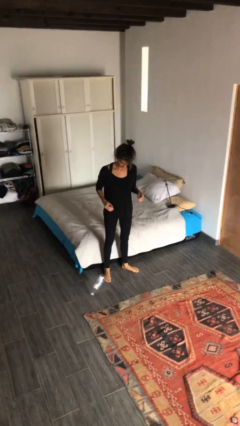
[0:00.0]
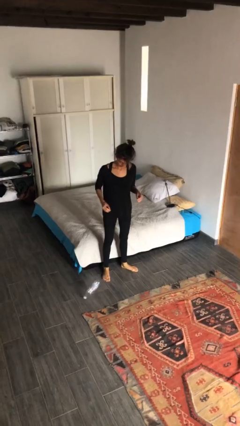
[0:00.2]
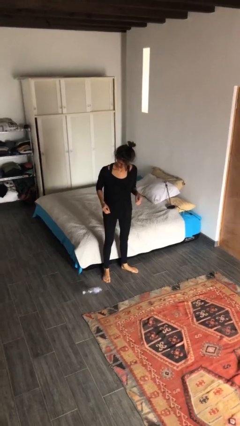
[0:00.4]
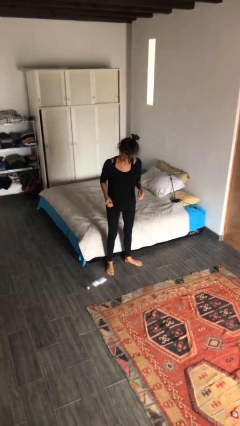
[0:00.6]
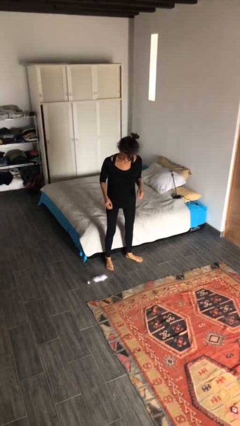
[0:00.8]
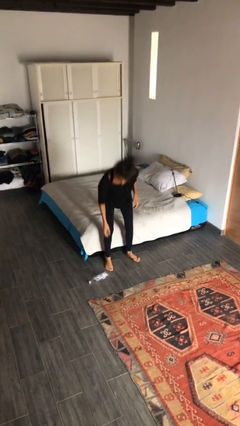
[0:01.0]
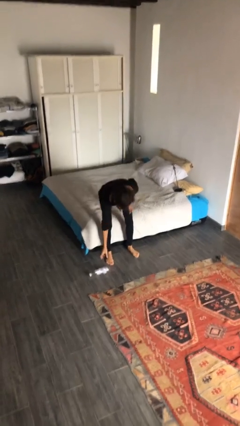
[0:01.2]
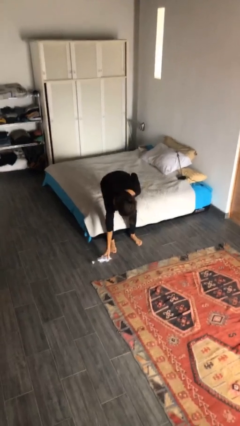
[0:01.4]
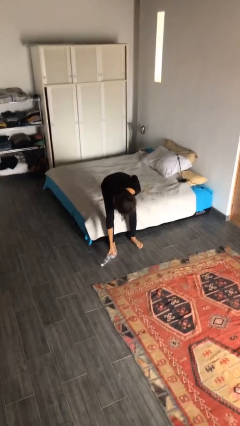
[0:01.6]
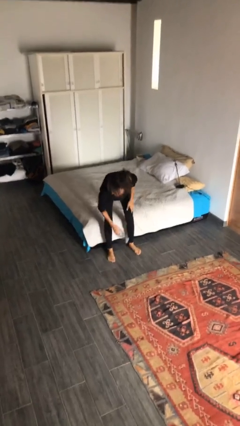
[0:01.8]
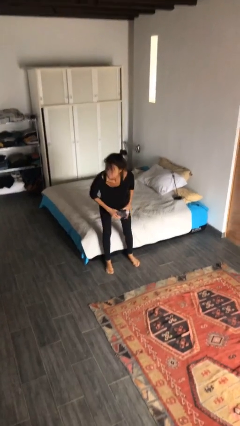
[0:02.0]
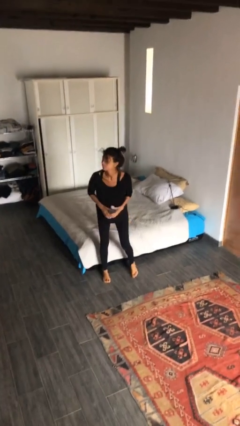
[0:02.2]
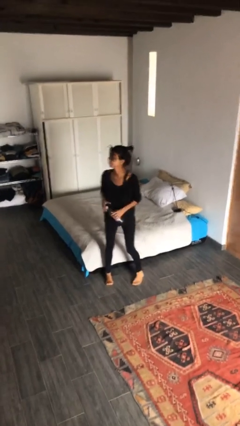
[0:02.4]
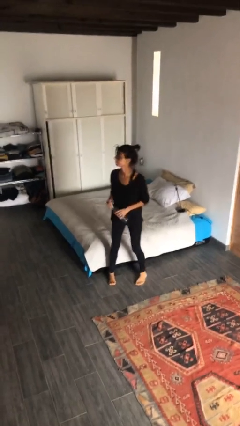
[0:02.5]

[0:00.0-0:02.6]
person picks up object from floor

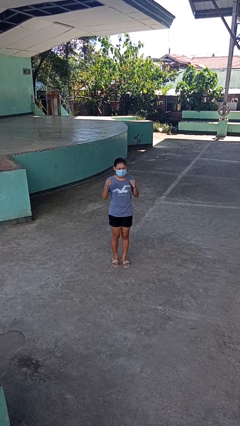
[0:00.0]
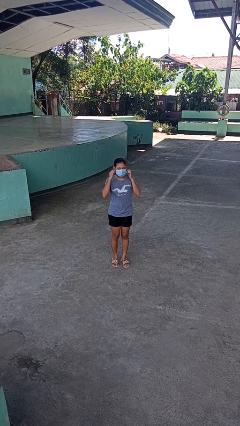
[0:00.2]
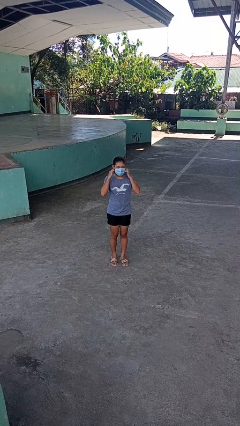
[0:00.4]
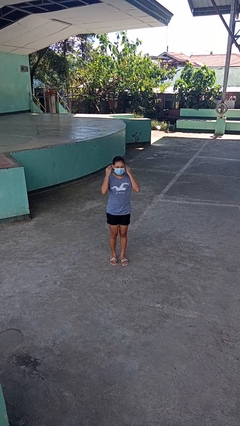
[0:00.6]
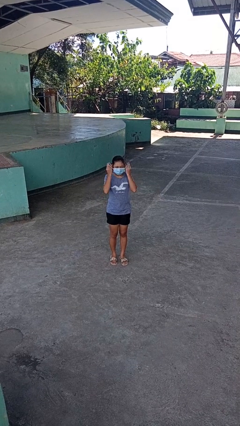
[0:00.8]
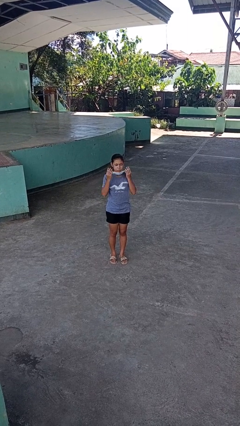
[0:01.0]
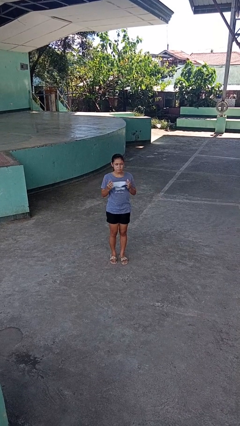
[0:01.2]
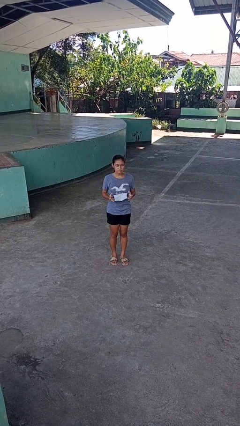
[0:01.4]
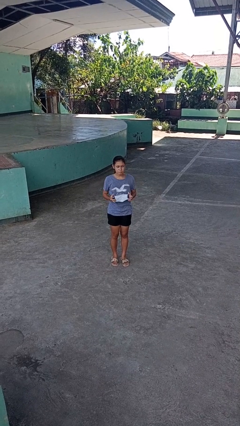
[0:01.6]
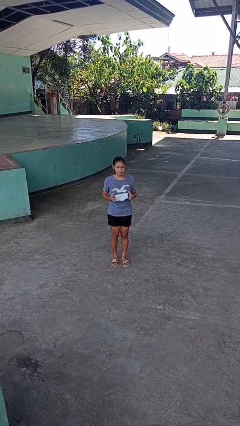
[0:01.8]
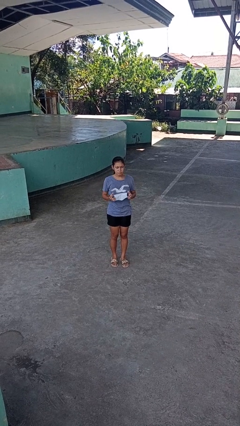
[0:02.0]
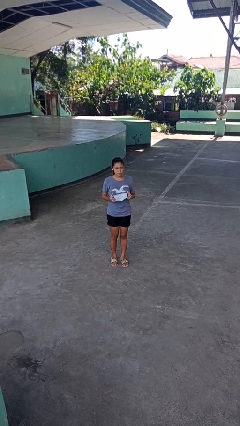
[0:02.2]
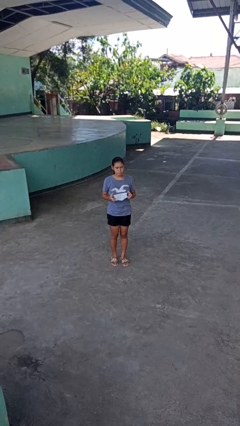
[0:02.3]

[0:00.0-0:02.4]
person takes off facemask

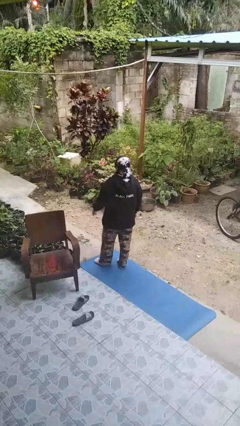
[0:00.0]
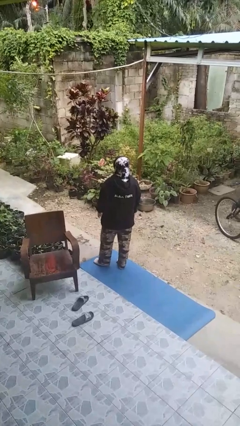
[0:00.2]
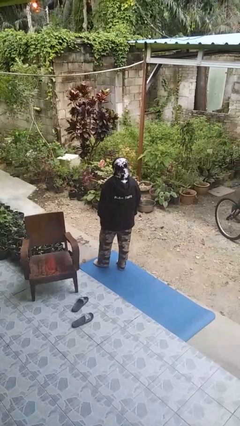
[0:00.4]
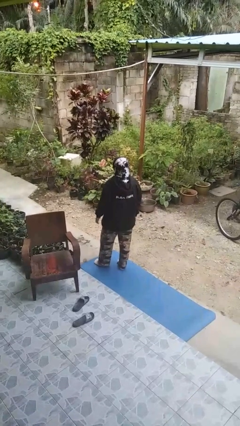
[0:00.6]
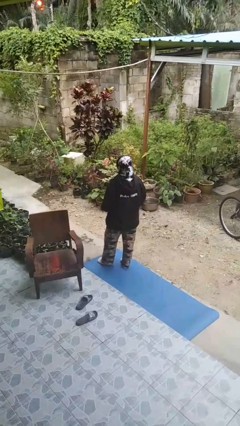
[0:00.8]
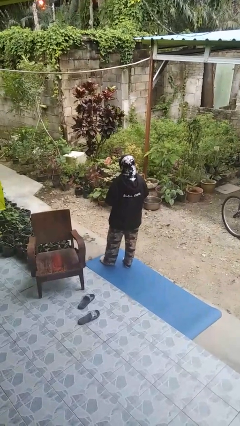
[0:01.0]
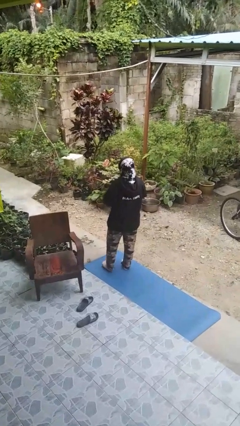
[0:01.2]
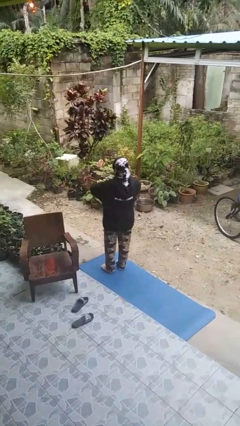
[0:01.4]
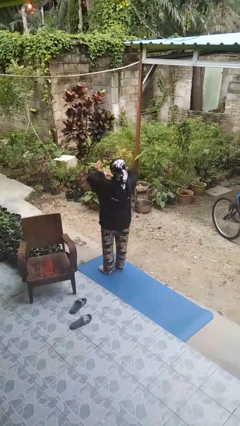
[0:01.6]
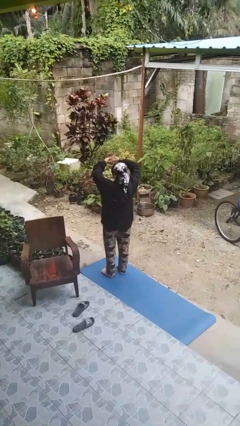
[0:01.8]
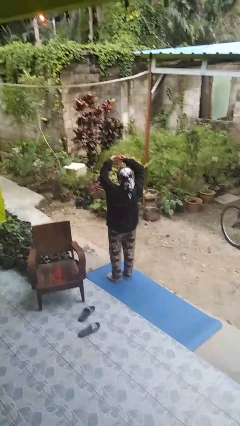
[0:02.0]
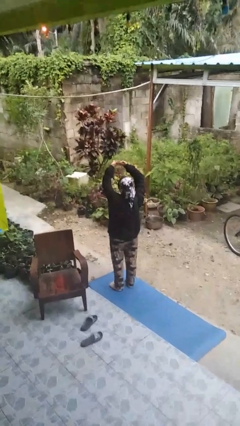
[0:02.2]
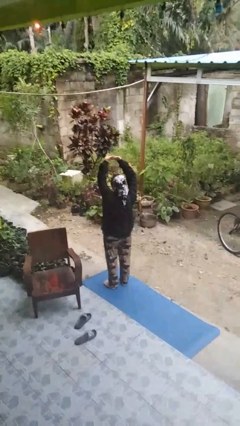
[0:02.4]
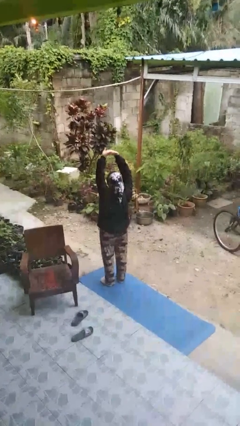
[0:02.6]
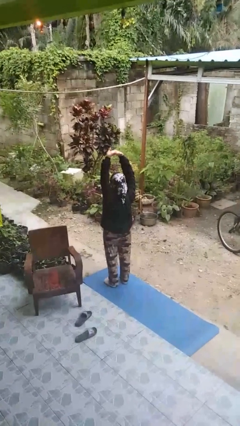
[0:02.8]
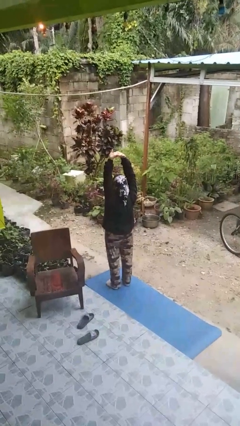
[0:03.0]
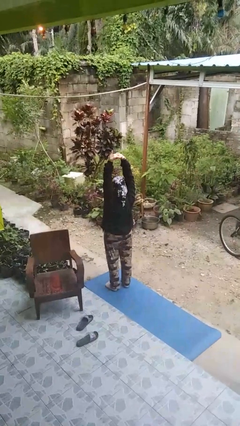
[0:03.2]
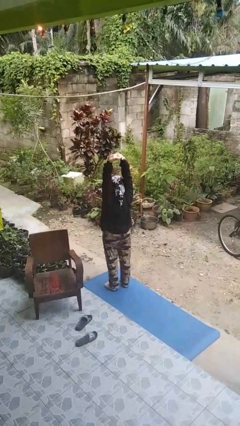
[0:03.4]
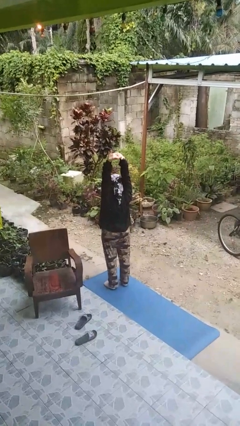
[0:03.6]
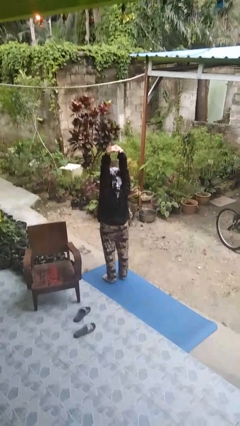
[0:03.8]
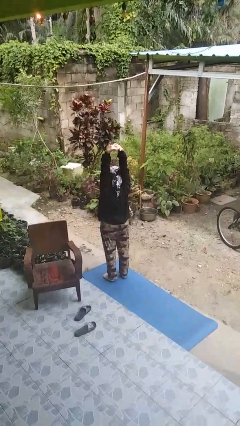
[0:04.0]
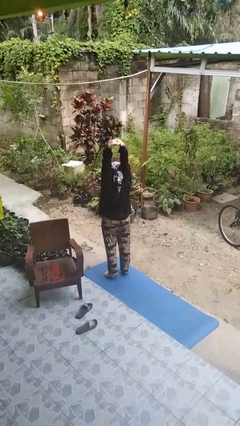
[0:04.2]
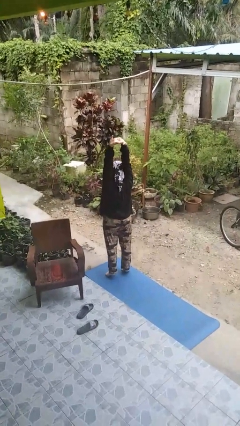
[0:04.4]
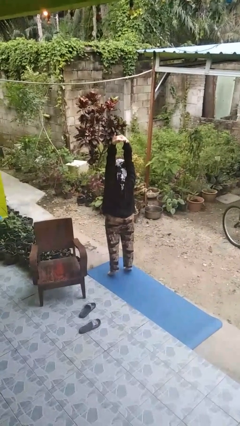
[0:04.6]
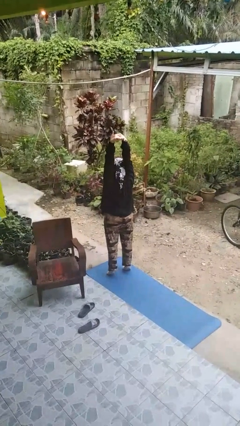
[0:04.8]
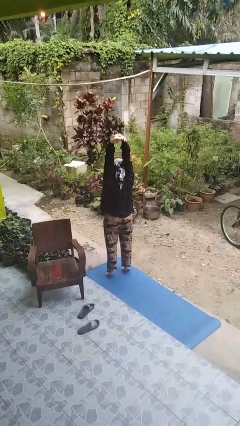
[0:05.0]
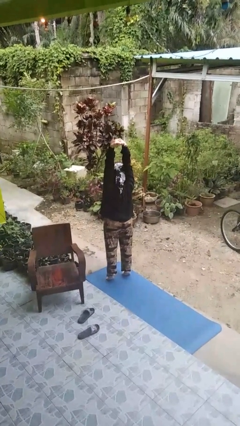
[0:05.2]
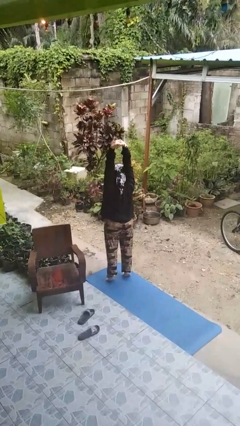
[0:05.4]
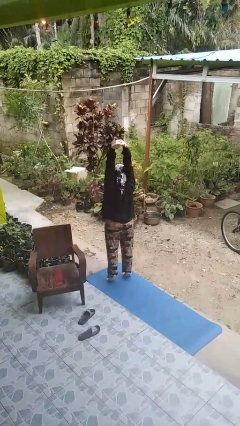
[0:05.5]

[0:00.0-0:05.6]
person stretches arms over head

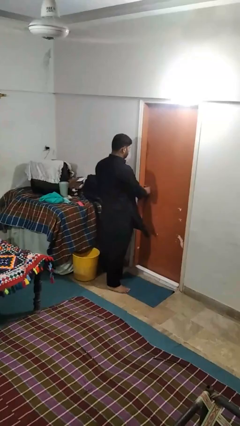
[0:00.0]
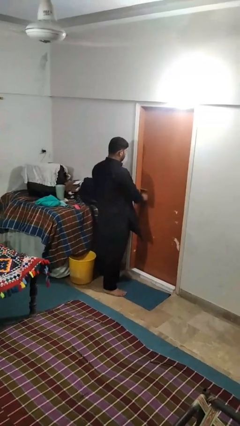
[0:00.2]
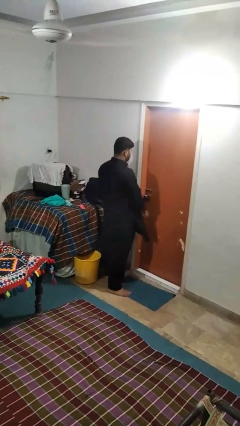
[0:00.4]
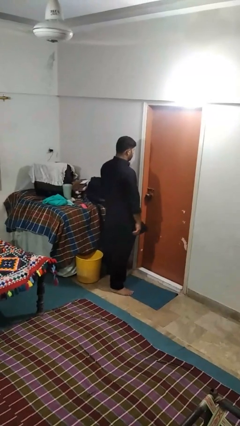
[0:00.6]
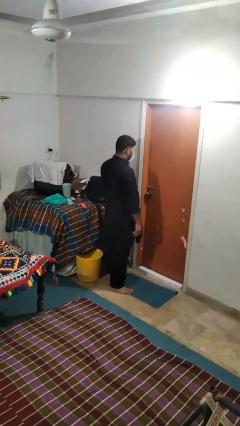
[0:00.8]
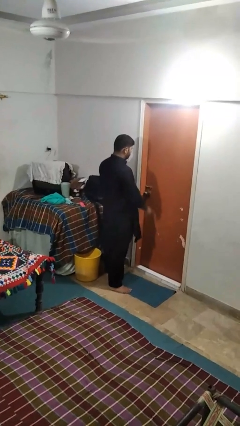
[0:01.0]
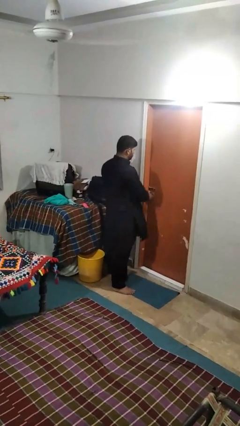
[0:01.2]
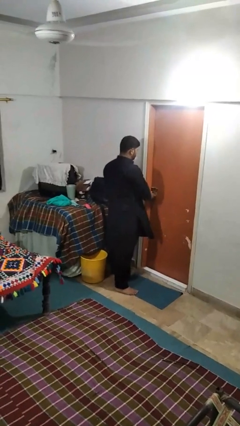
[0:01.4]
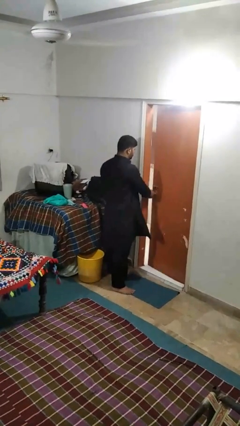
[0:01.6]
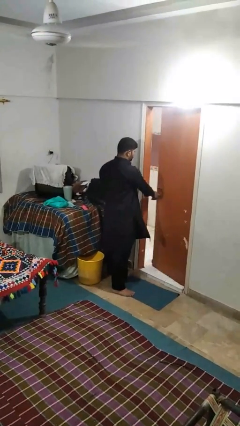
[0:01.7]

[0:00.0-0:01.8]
person opens facility door

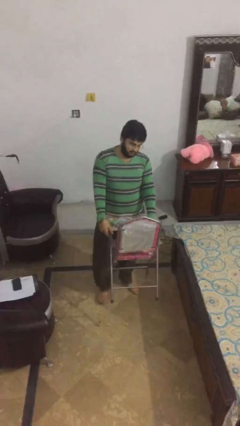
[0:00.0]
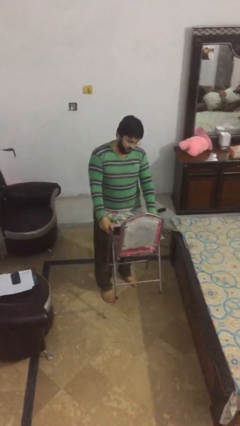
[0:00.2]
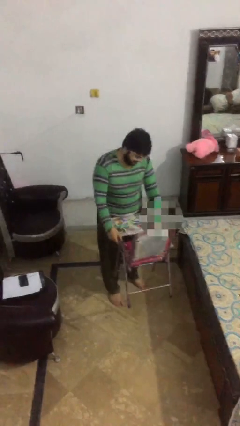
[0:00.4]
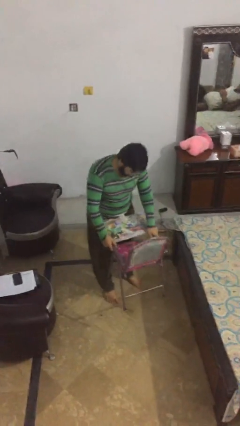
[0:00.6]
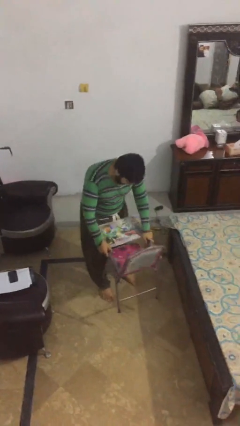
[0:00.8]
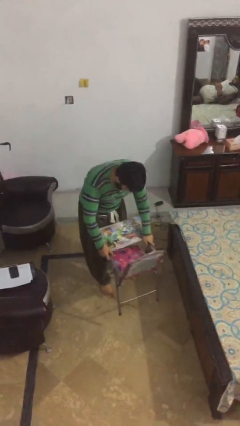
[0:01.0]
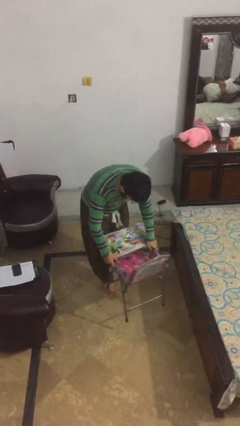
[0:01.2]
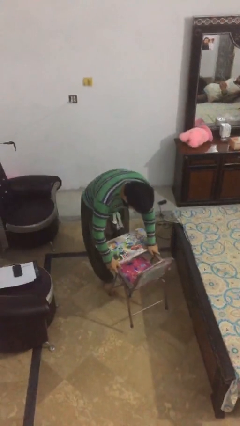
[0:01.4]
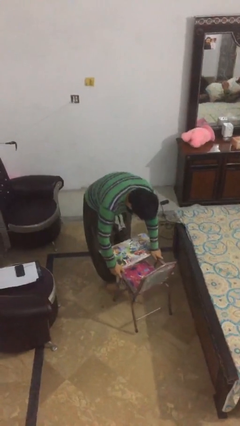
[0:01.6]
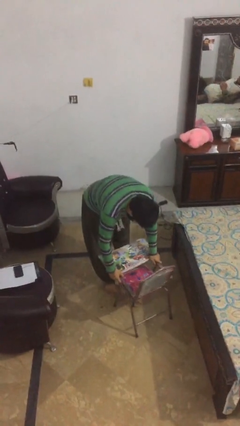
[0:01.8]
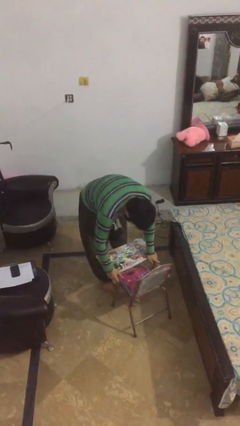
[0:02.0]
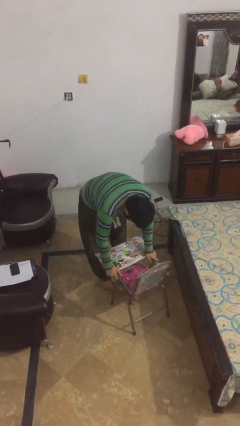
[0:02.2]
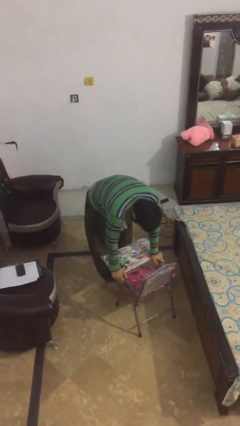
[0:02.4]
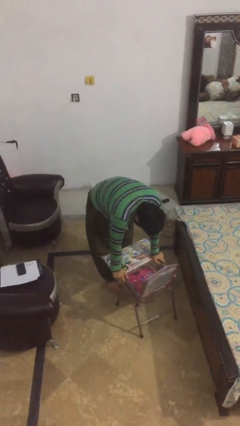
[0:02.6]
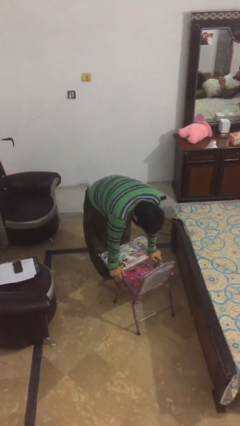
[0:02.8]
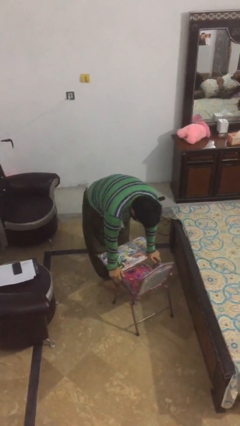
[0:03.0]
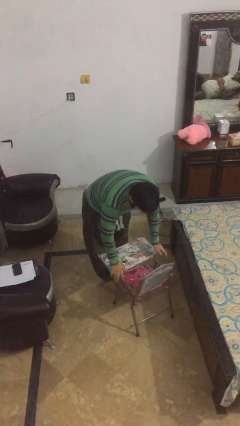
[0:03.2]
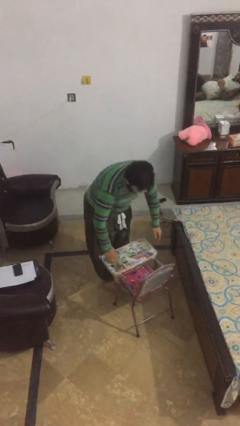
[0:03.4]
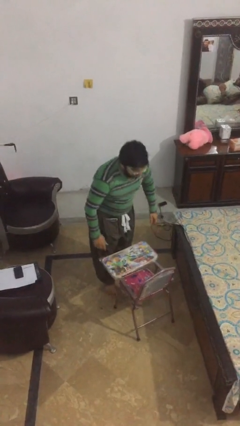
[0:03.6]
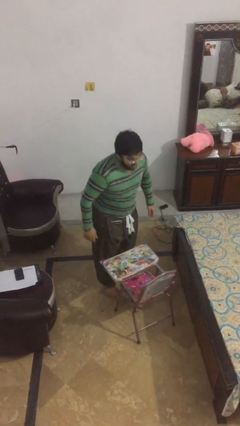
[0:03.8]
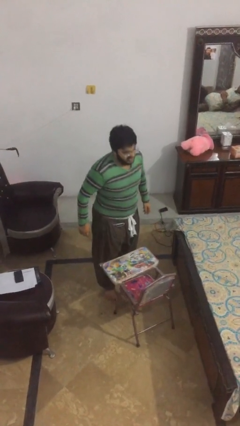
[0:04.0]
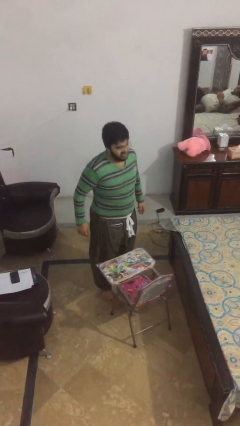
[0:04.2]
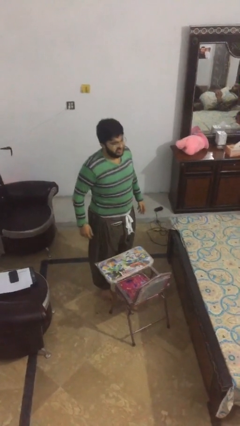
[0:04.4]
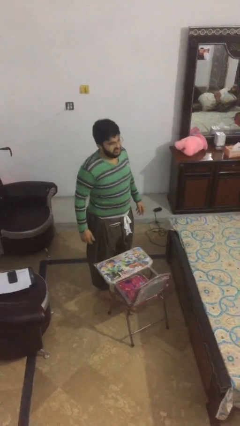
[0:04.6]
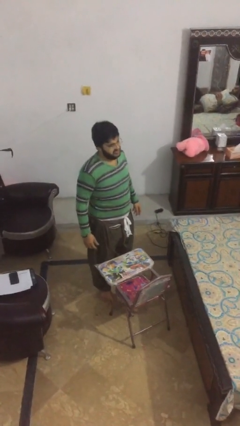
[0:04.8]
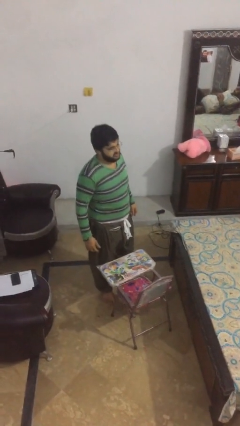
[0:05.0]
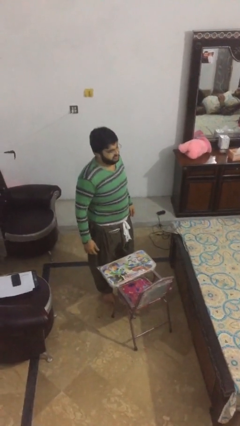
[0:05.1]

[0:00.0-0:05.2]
person puts down object on floor
